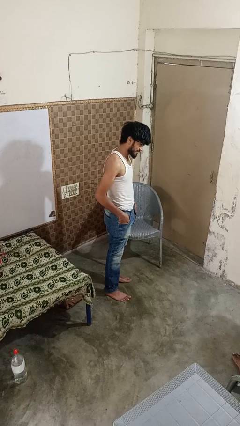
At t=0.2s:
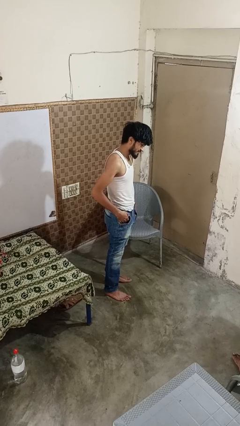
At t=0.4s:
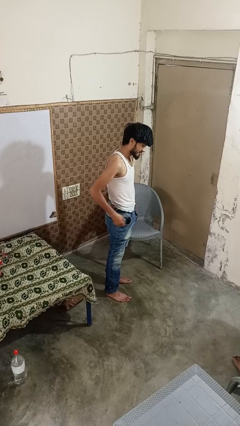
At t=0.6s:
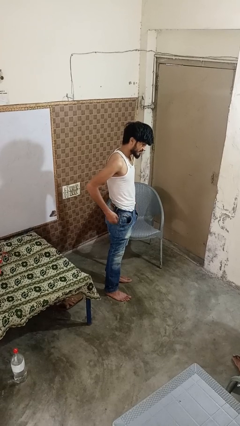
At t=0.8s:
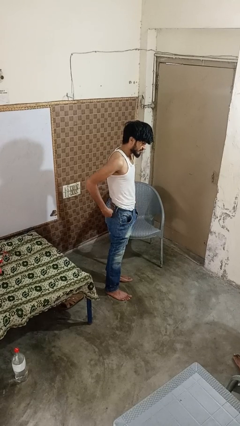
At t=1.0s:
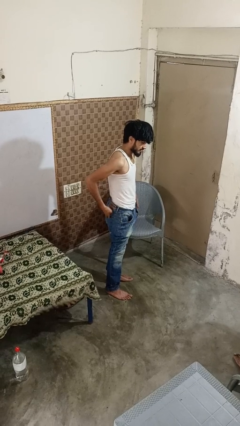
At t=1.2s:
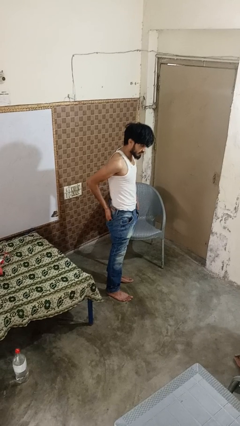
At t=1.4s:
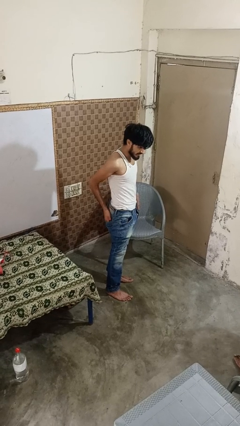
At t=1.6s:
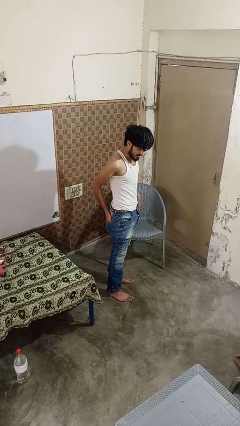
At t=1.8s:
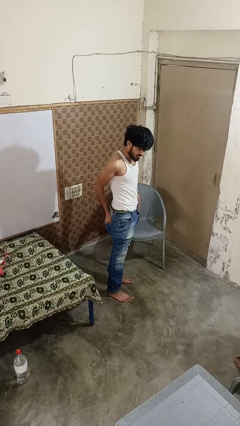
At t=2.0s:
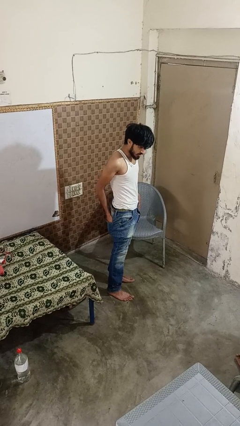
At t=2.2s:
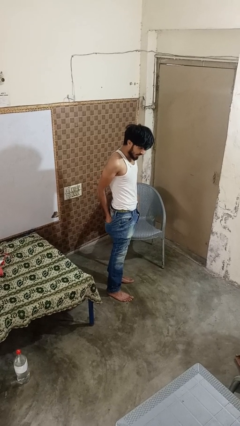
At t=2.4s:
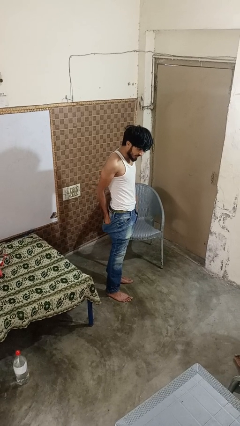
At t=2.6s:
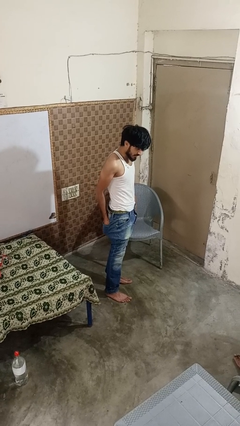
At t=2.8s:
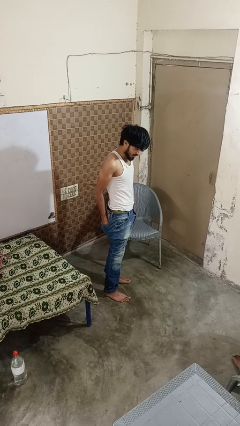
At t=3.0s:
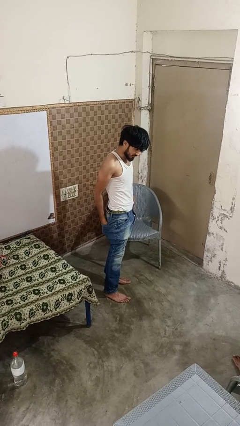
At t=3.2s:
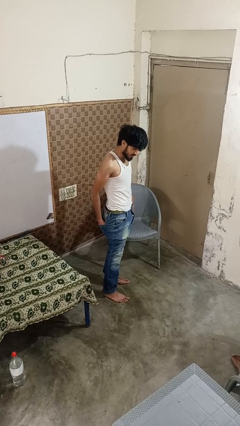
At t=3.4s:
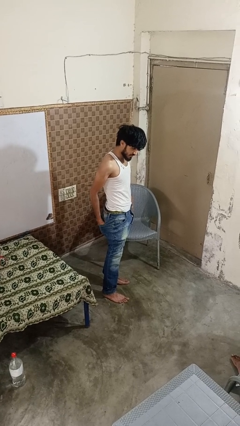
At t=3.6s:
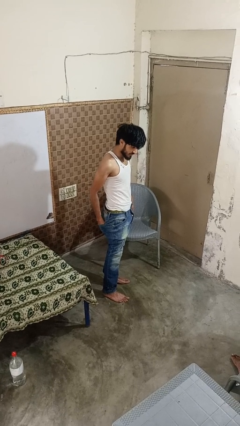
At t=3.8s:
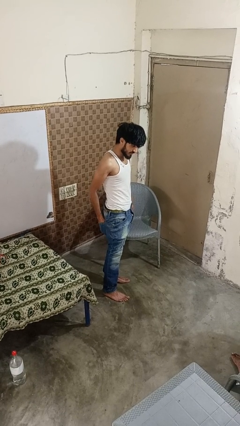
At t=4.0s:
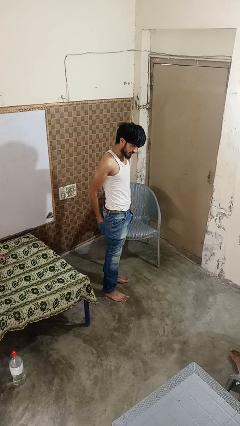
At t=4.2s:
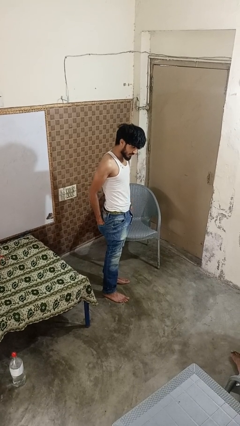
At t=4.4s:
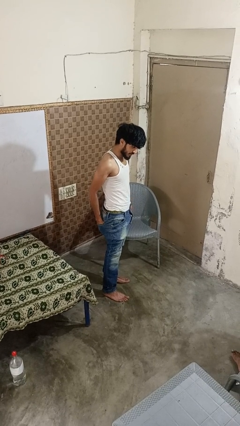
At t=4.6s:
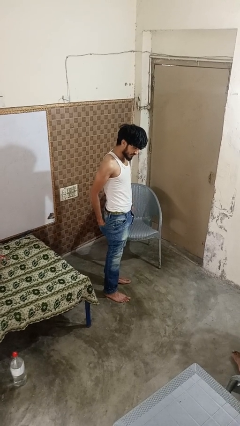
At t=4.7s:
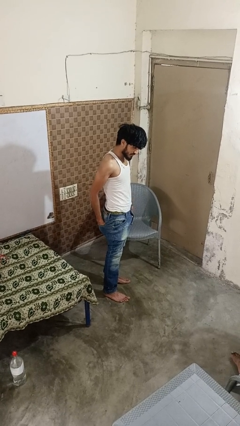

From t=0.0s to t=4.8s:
person puts hands in back pockets

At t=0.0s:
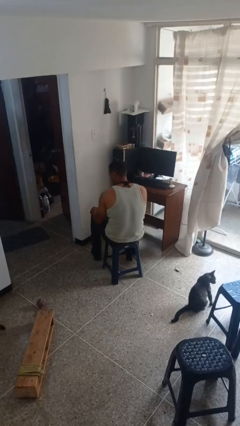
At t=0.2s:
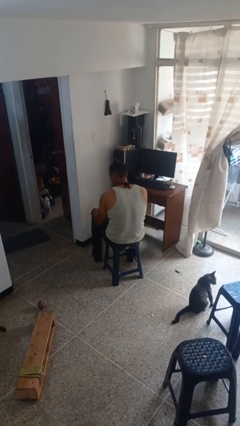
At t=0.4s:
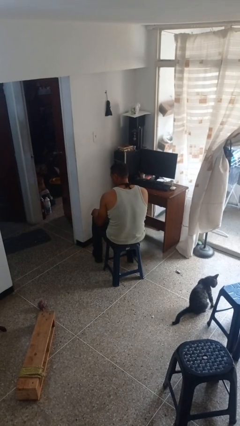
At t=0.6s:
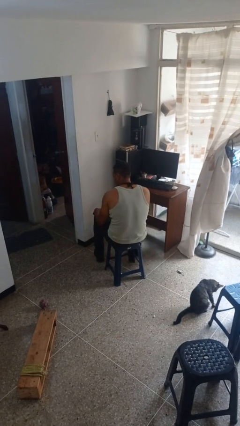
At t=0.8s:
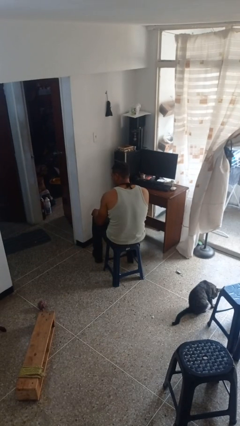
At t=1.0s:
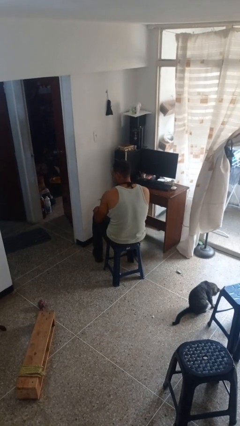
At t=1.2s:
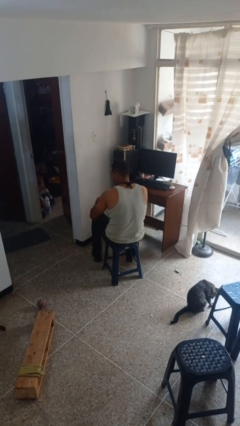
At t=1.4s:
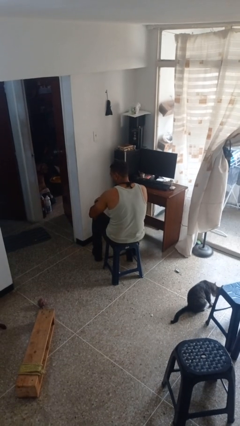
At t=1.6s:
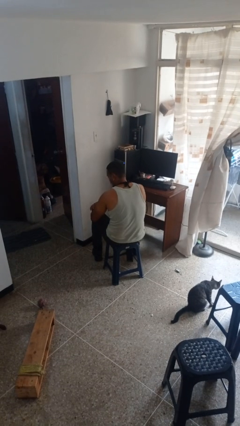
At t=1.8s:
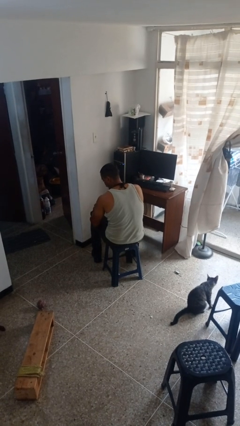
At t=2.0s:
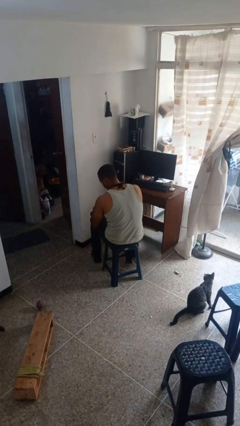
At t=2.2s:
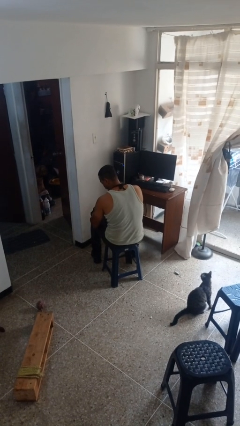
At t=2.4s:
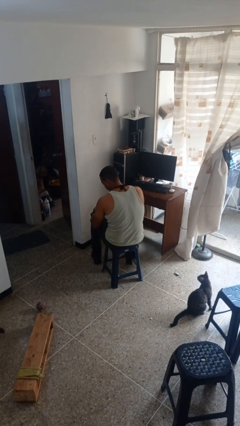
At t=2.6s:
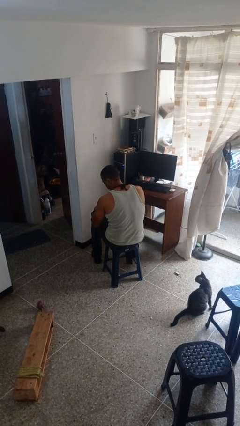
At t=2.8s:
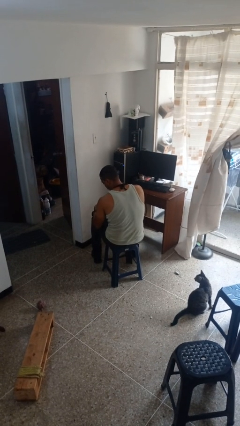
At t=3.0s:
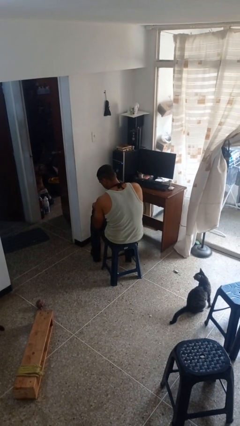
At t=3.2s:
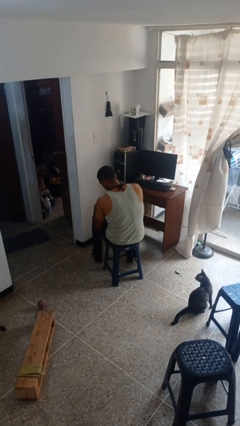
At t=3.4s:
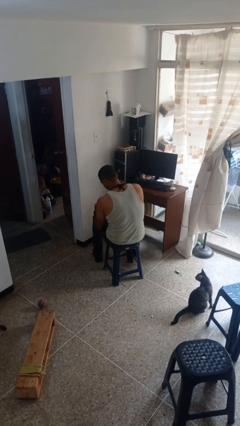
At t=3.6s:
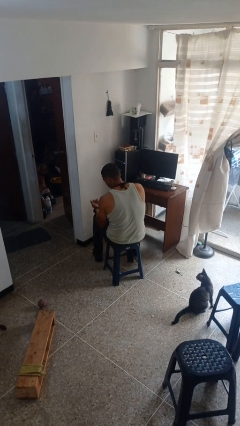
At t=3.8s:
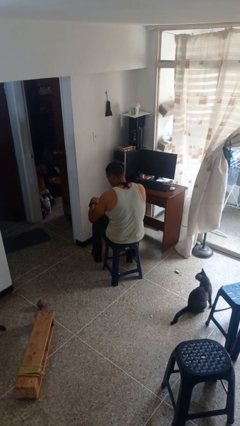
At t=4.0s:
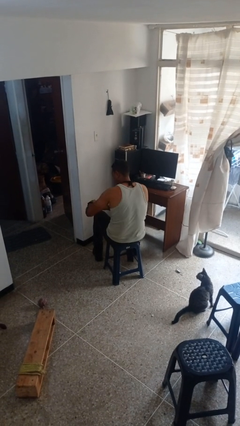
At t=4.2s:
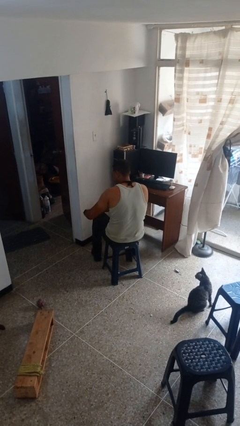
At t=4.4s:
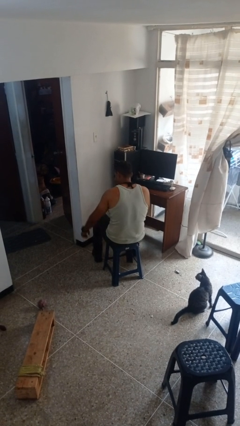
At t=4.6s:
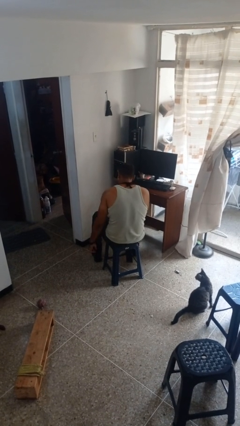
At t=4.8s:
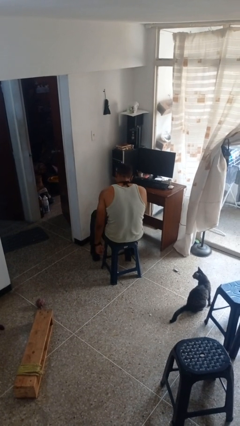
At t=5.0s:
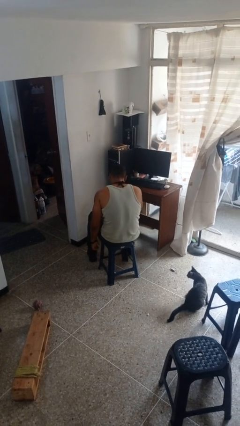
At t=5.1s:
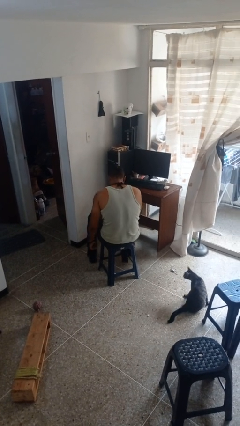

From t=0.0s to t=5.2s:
person puts on wristwatch

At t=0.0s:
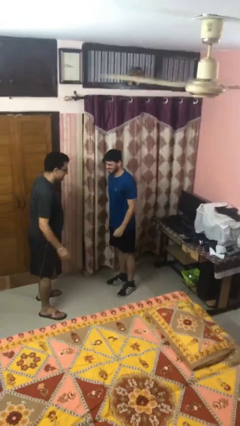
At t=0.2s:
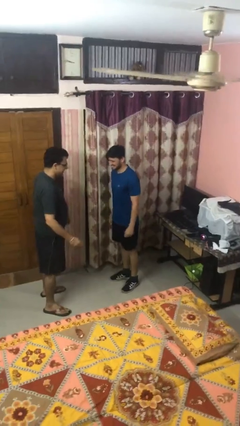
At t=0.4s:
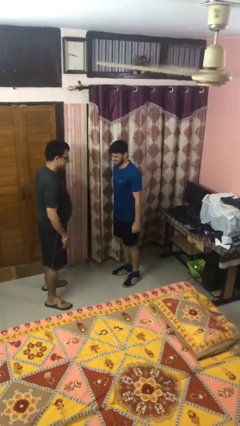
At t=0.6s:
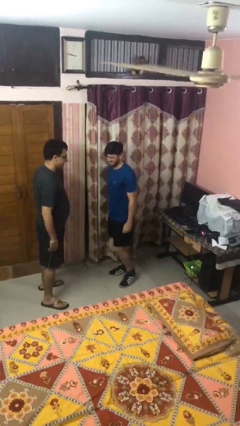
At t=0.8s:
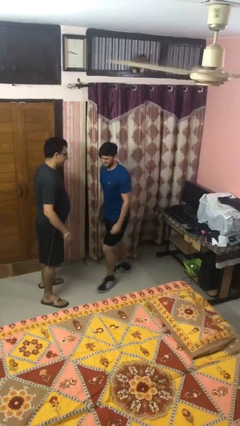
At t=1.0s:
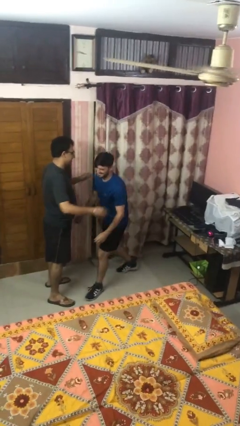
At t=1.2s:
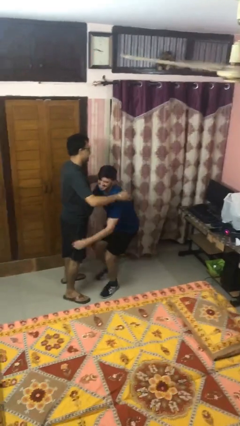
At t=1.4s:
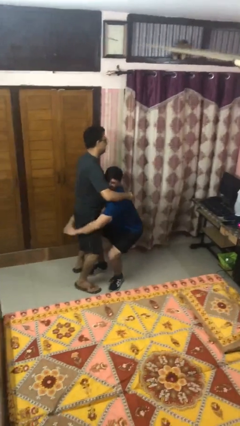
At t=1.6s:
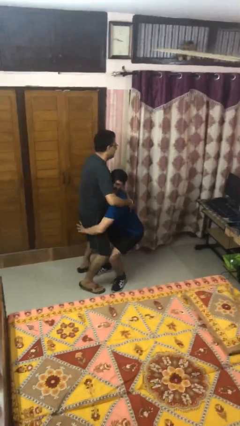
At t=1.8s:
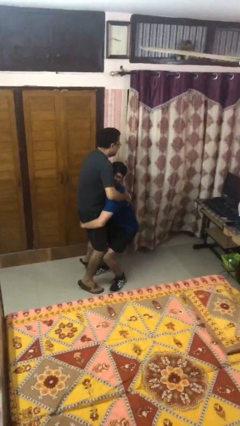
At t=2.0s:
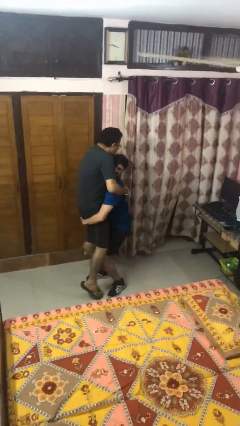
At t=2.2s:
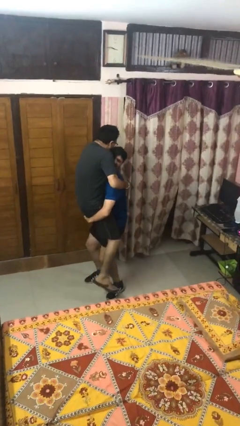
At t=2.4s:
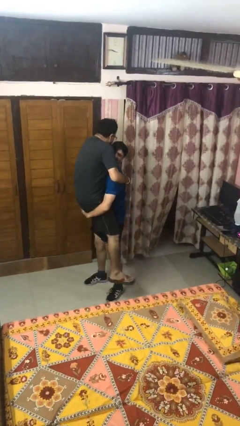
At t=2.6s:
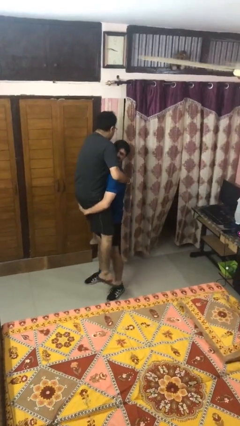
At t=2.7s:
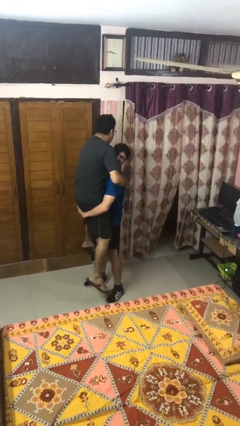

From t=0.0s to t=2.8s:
person picks up person

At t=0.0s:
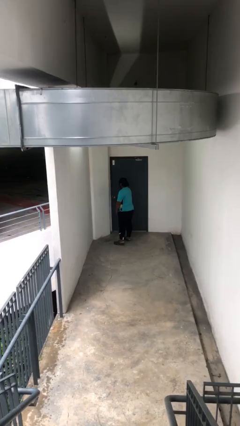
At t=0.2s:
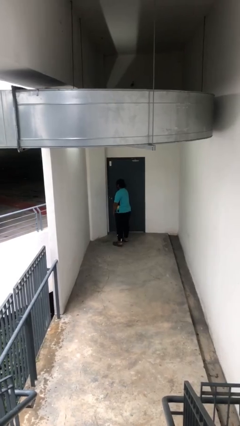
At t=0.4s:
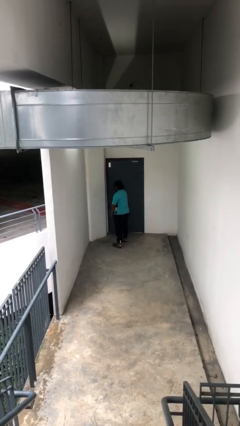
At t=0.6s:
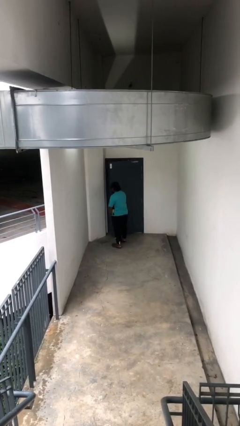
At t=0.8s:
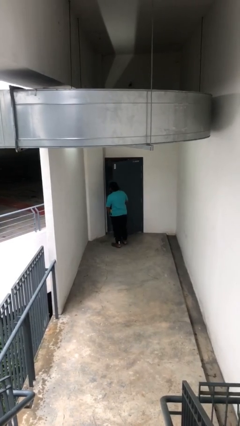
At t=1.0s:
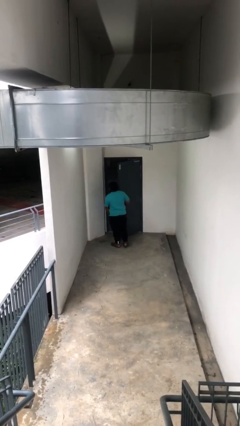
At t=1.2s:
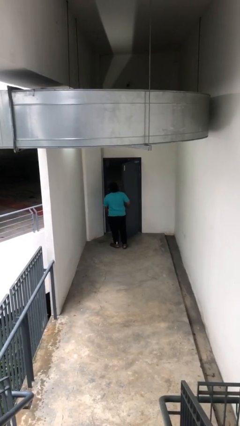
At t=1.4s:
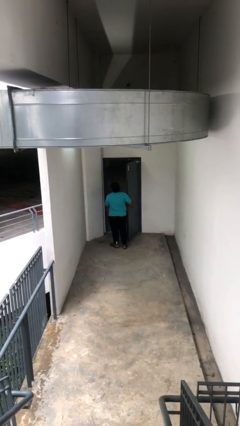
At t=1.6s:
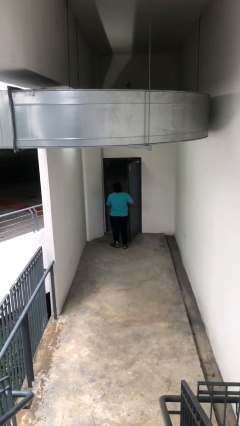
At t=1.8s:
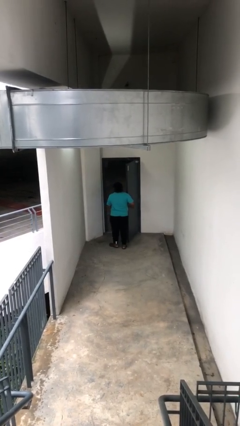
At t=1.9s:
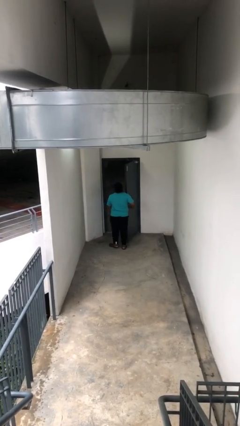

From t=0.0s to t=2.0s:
person opens facility door

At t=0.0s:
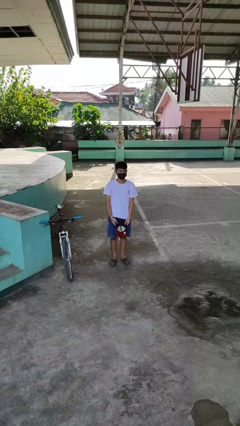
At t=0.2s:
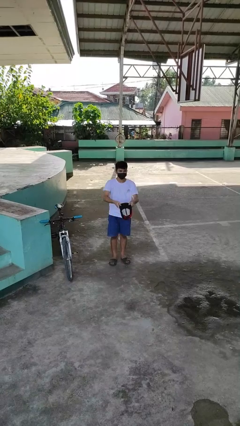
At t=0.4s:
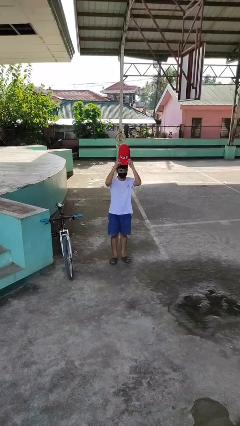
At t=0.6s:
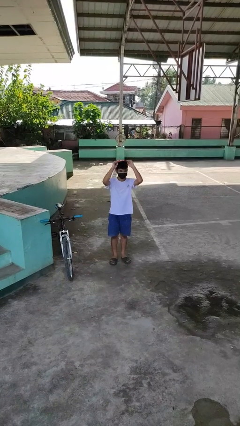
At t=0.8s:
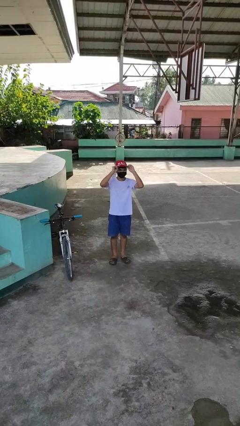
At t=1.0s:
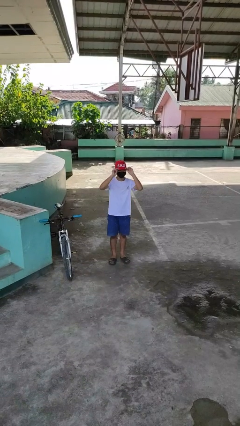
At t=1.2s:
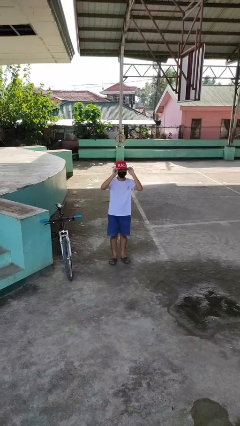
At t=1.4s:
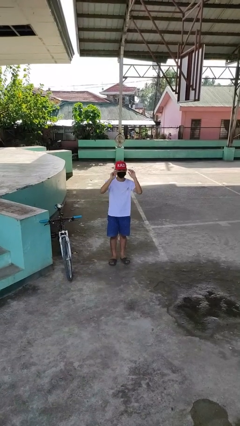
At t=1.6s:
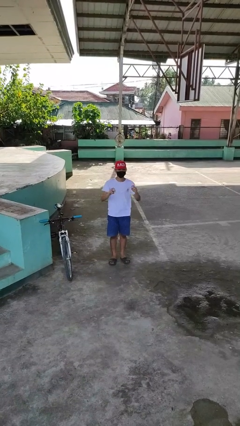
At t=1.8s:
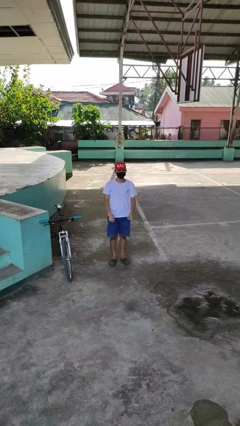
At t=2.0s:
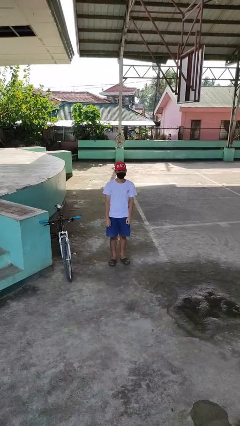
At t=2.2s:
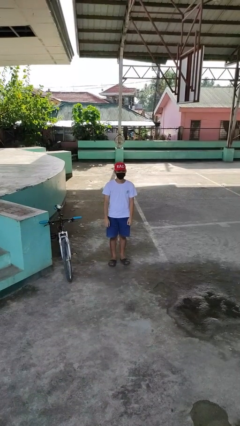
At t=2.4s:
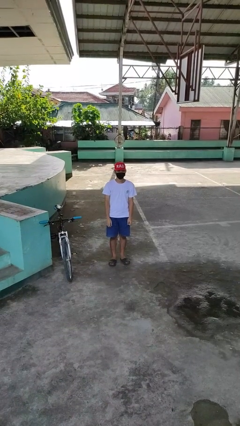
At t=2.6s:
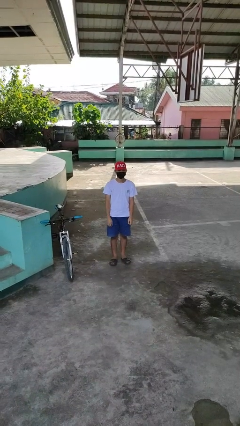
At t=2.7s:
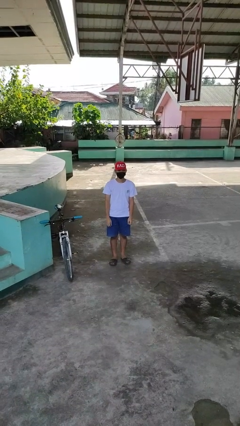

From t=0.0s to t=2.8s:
person puts on hat
